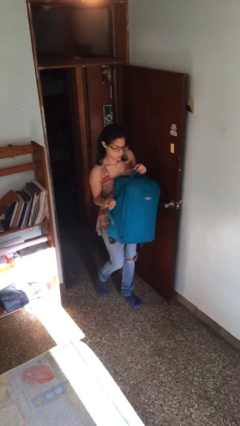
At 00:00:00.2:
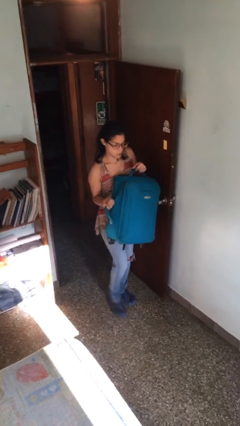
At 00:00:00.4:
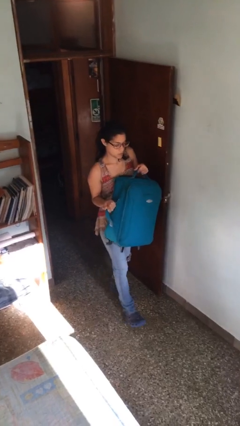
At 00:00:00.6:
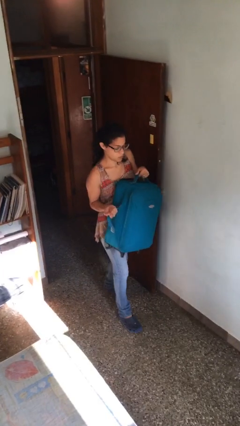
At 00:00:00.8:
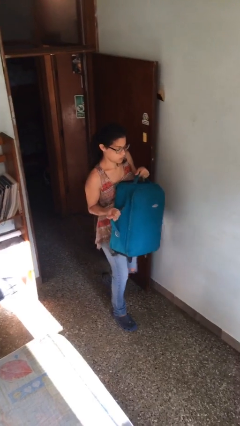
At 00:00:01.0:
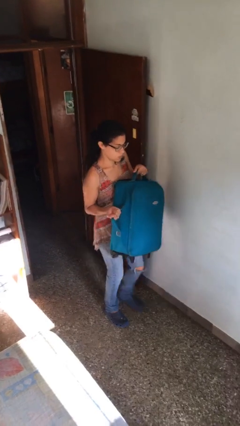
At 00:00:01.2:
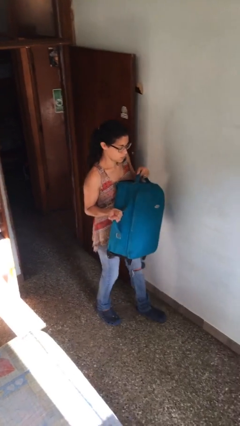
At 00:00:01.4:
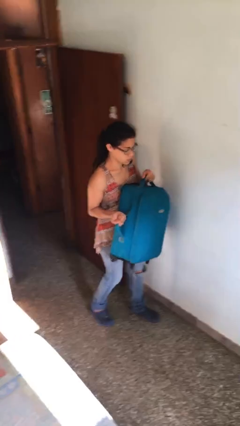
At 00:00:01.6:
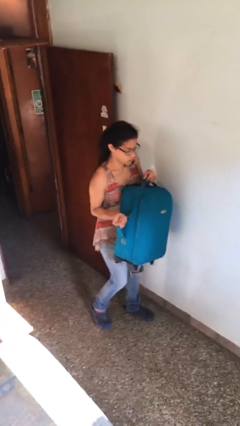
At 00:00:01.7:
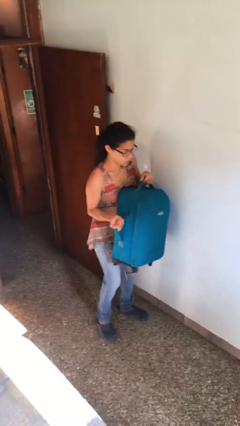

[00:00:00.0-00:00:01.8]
person carries heavy object

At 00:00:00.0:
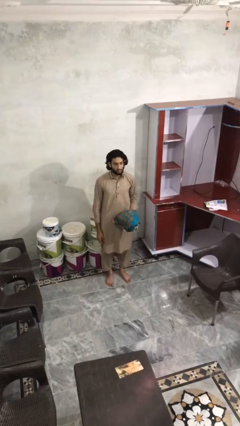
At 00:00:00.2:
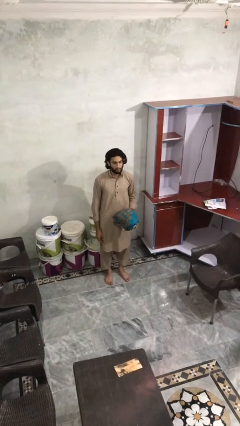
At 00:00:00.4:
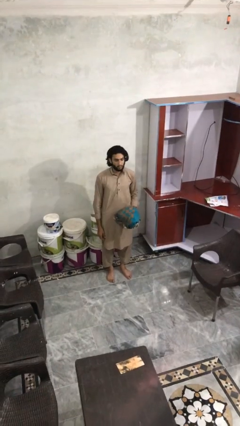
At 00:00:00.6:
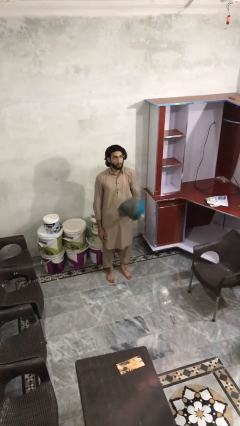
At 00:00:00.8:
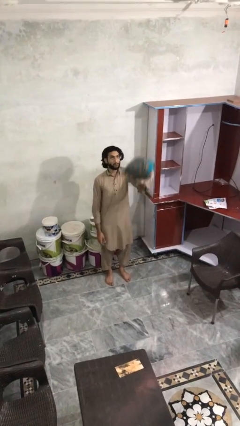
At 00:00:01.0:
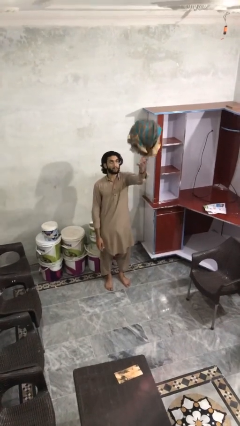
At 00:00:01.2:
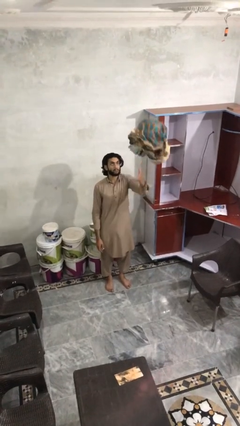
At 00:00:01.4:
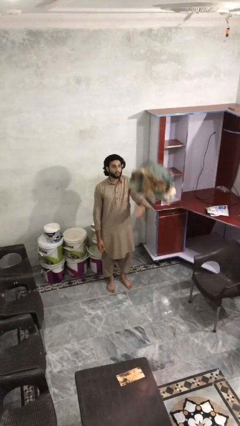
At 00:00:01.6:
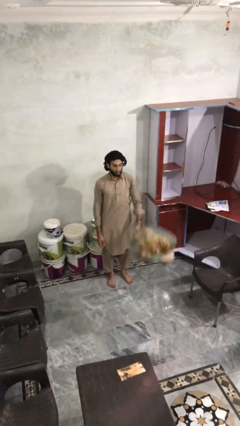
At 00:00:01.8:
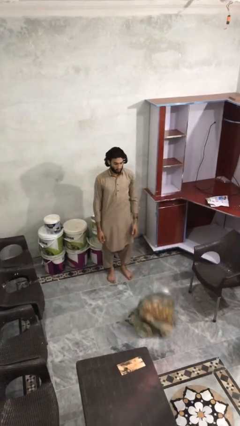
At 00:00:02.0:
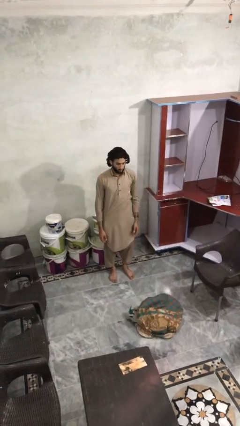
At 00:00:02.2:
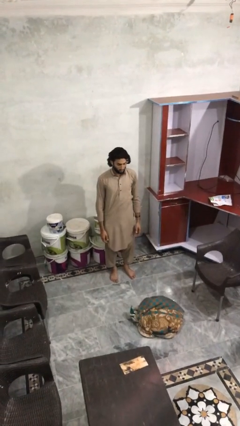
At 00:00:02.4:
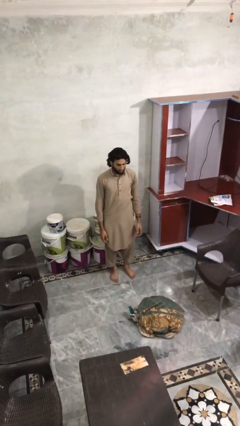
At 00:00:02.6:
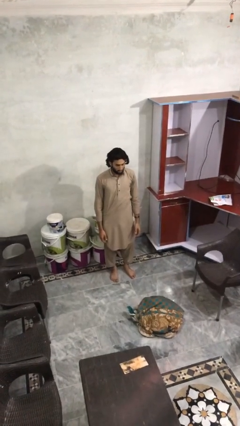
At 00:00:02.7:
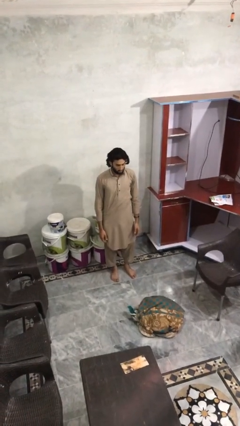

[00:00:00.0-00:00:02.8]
person throws object into air

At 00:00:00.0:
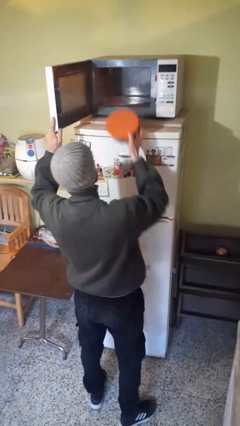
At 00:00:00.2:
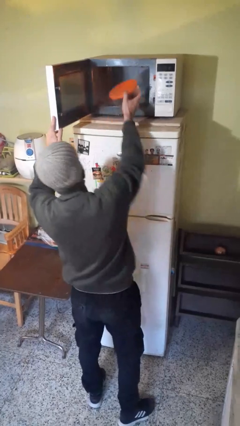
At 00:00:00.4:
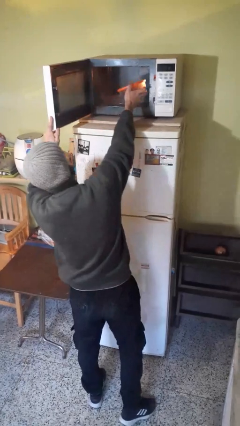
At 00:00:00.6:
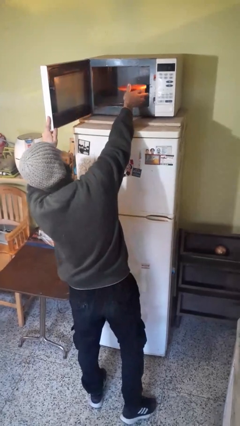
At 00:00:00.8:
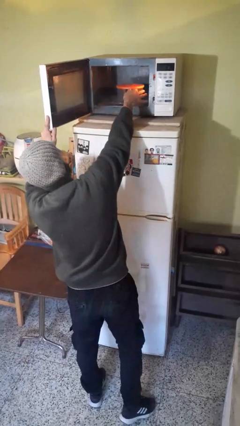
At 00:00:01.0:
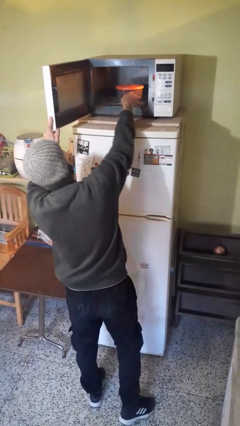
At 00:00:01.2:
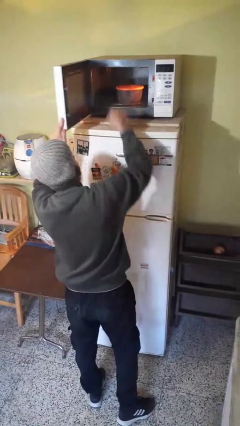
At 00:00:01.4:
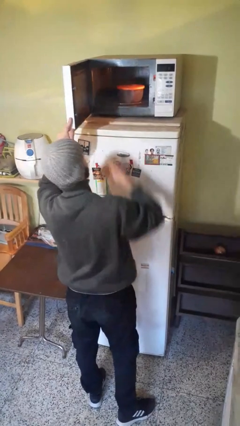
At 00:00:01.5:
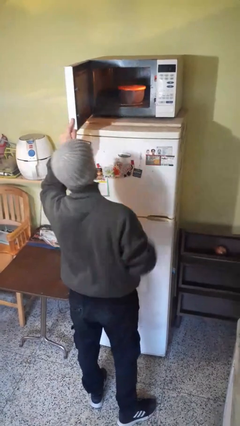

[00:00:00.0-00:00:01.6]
person puts object into microwave

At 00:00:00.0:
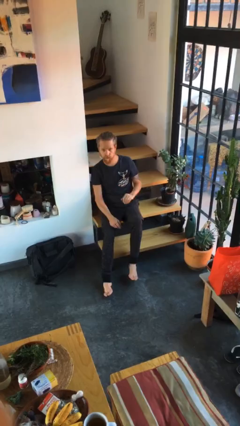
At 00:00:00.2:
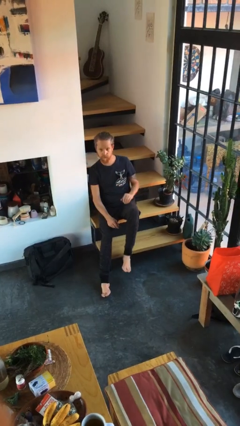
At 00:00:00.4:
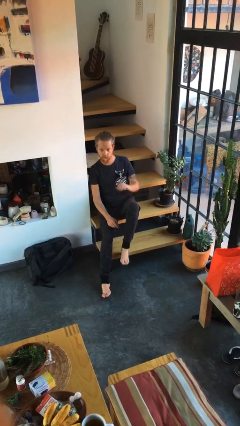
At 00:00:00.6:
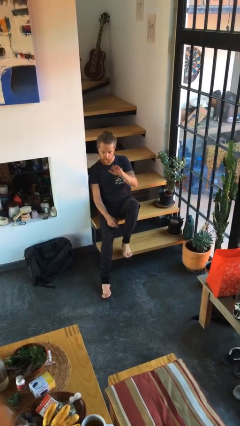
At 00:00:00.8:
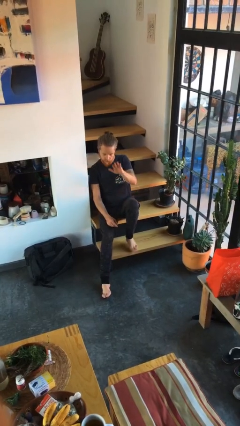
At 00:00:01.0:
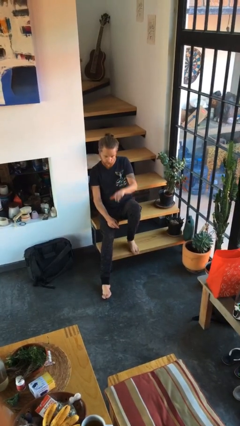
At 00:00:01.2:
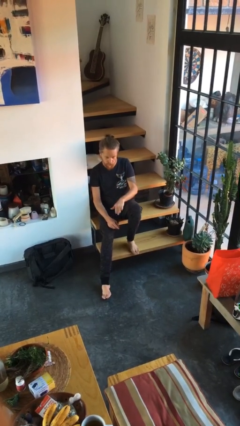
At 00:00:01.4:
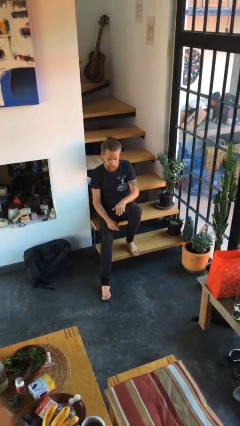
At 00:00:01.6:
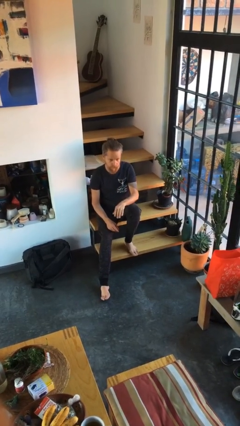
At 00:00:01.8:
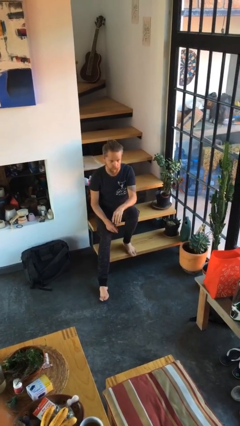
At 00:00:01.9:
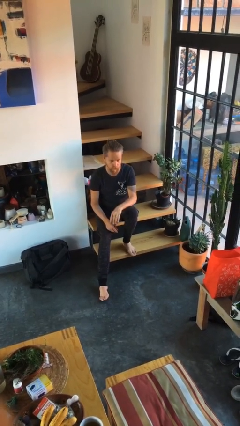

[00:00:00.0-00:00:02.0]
person gestures swipe down

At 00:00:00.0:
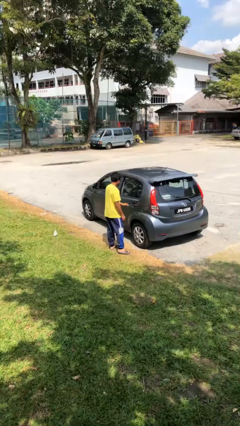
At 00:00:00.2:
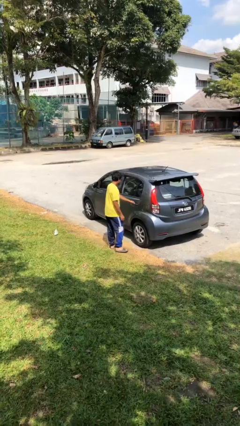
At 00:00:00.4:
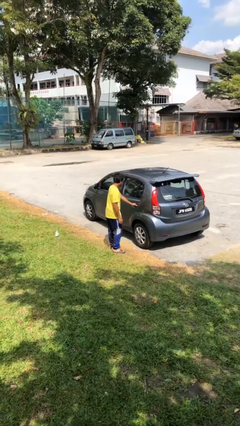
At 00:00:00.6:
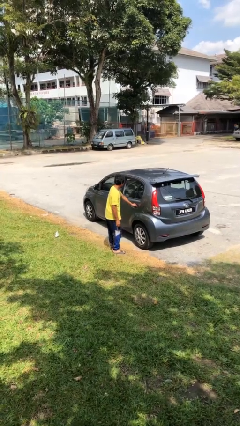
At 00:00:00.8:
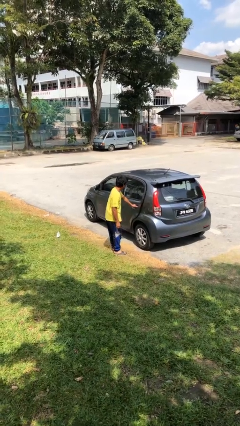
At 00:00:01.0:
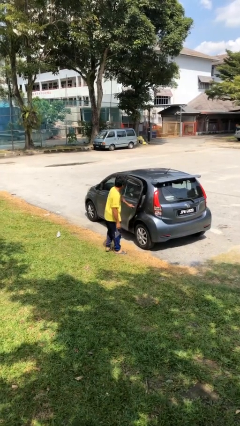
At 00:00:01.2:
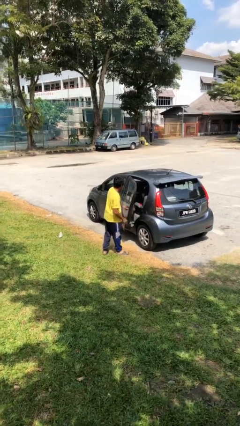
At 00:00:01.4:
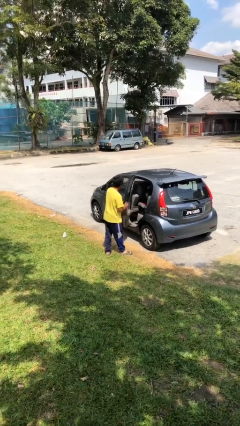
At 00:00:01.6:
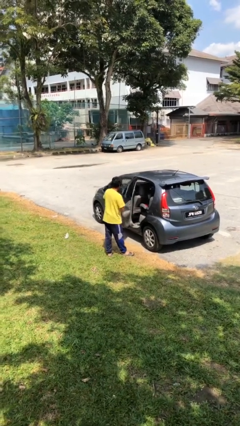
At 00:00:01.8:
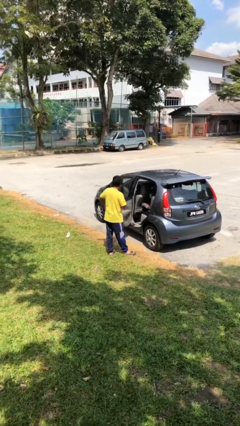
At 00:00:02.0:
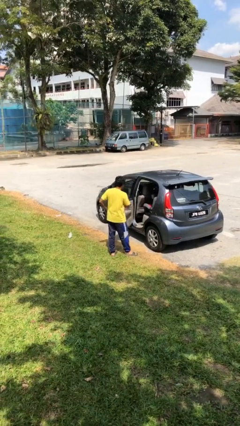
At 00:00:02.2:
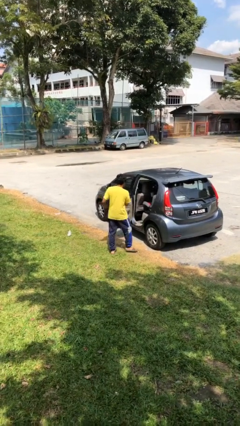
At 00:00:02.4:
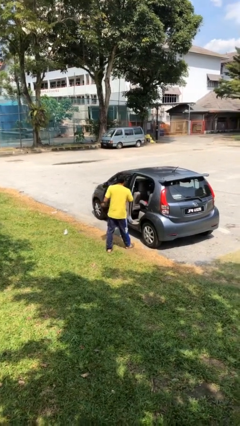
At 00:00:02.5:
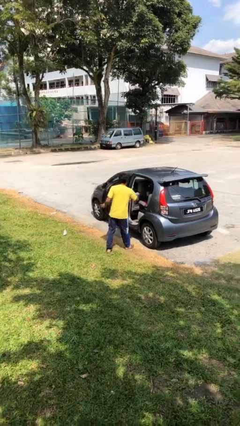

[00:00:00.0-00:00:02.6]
person opens car door

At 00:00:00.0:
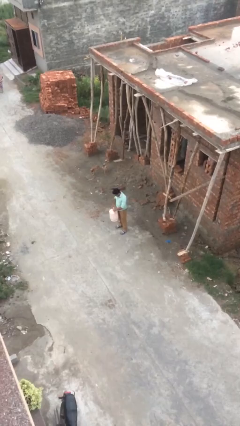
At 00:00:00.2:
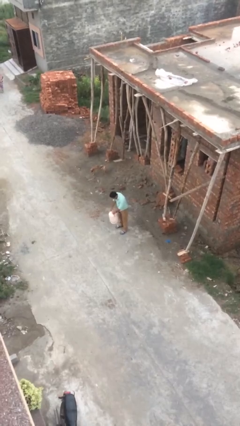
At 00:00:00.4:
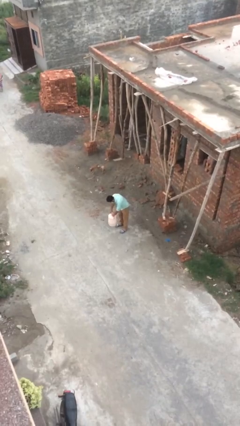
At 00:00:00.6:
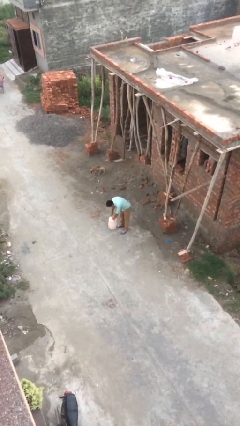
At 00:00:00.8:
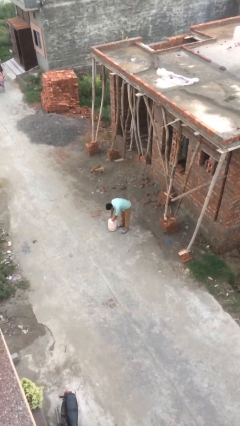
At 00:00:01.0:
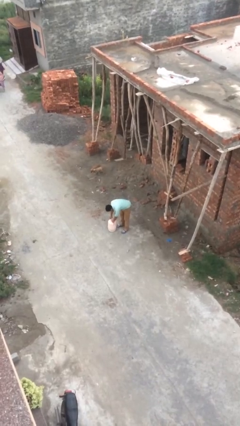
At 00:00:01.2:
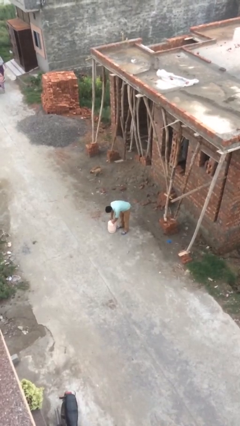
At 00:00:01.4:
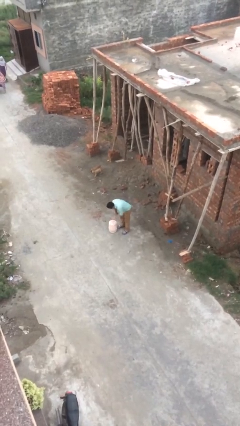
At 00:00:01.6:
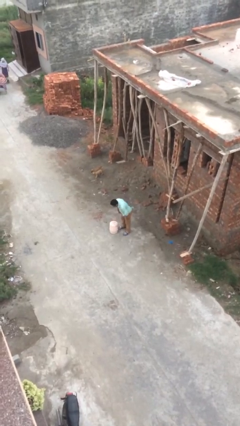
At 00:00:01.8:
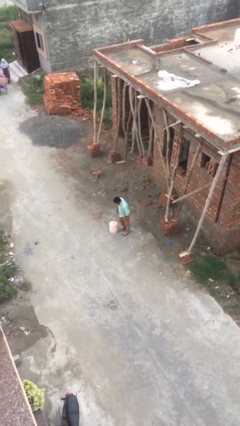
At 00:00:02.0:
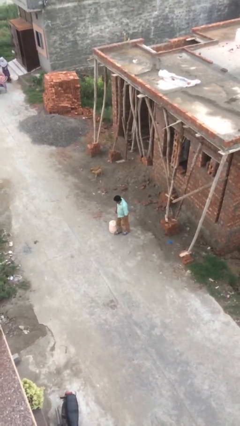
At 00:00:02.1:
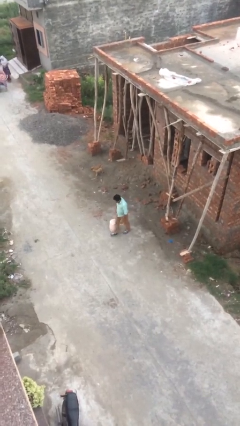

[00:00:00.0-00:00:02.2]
person puts down object on floor

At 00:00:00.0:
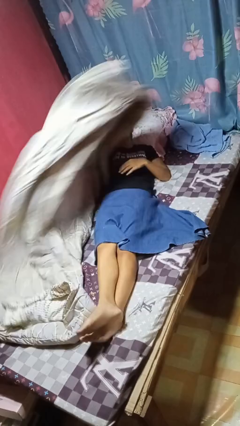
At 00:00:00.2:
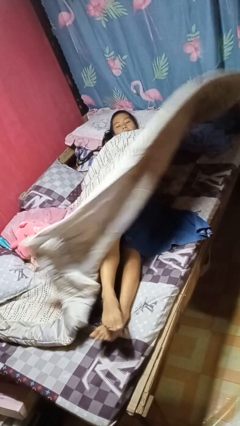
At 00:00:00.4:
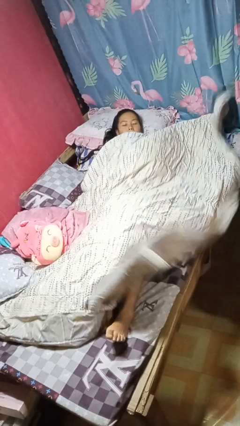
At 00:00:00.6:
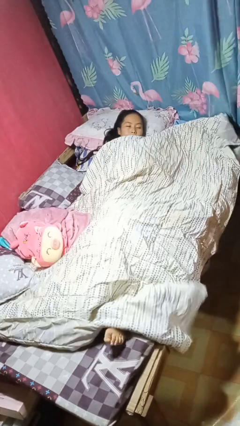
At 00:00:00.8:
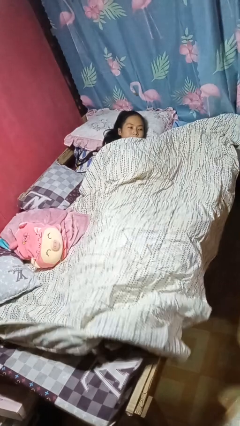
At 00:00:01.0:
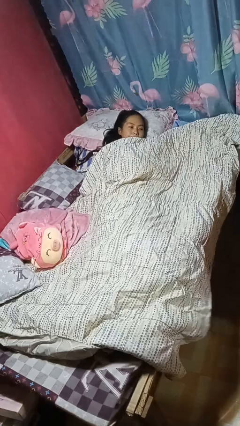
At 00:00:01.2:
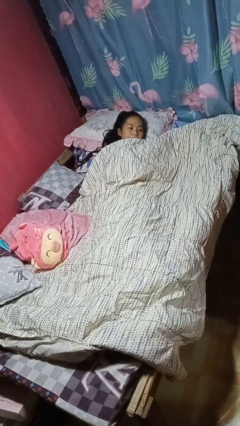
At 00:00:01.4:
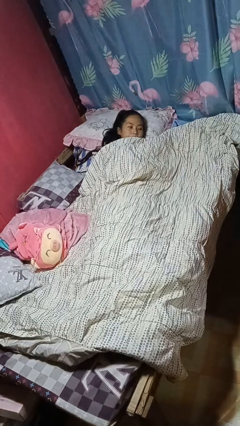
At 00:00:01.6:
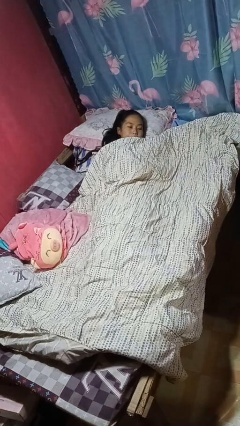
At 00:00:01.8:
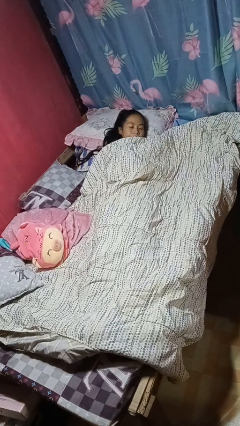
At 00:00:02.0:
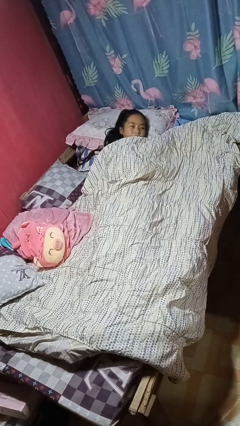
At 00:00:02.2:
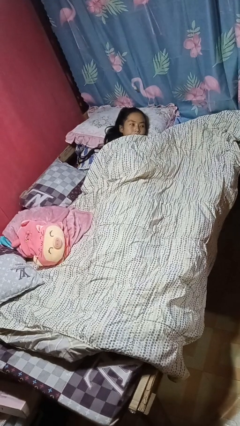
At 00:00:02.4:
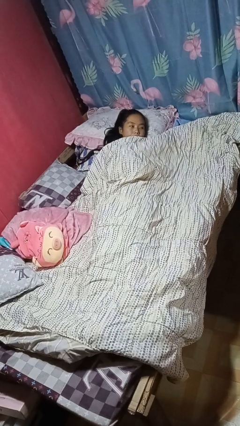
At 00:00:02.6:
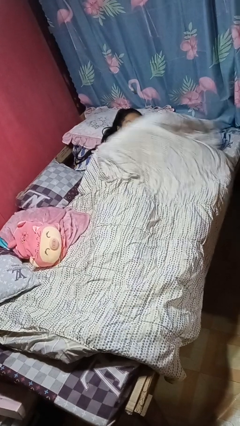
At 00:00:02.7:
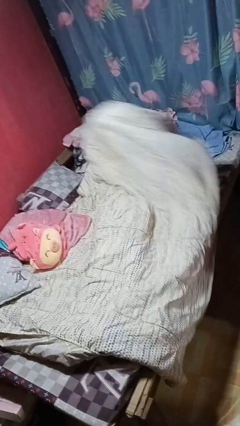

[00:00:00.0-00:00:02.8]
person covers with bedsheets

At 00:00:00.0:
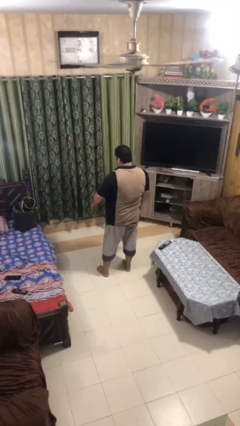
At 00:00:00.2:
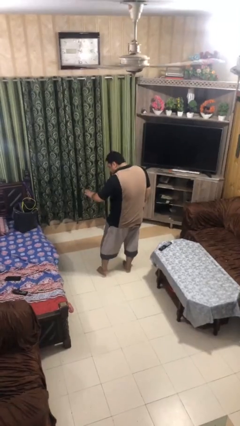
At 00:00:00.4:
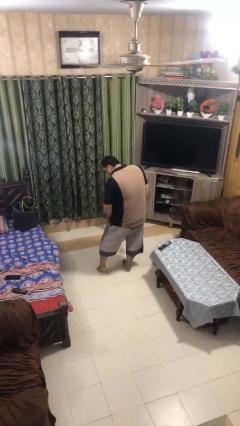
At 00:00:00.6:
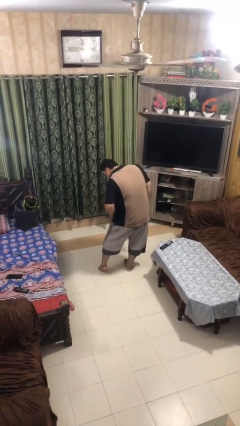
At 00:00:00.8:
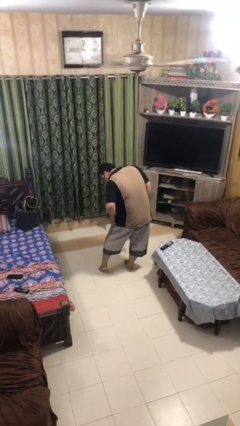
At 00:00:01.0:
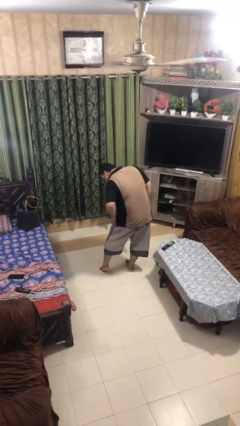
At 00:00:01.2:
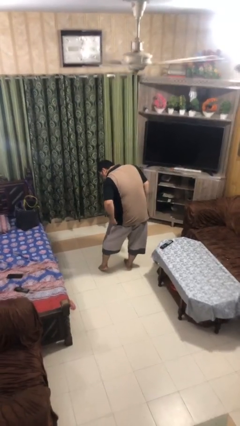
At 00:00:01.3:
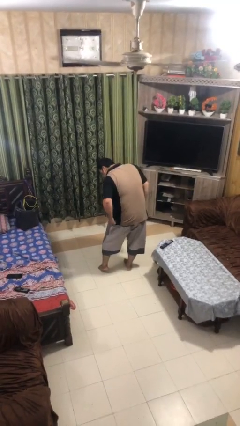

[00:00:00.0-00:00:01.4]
person swats bug
